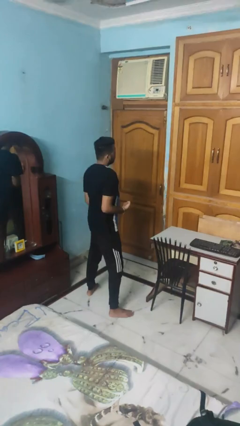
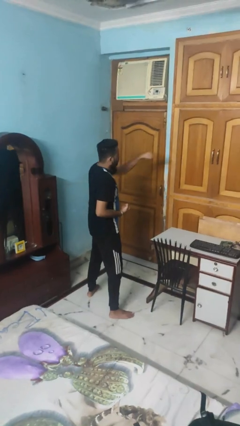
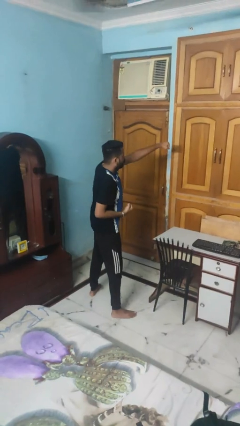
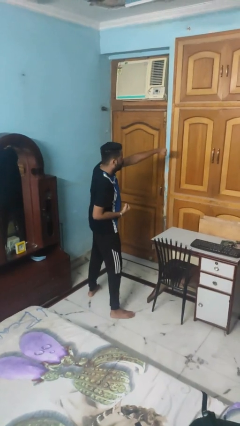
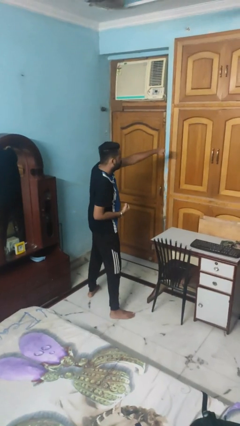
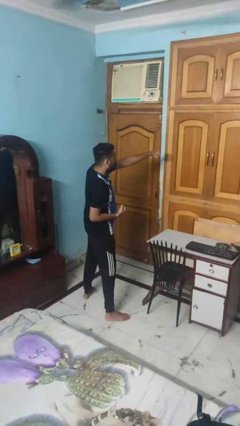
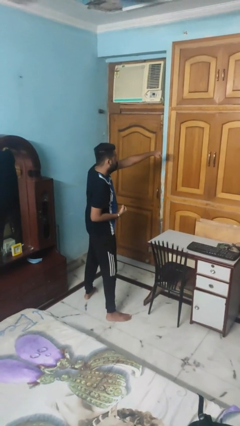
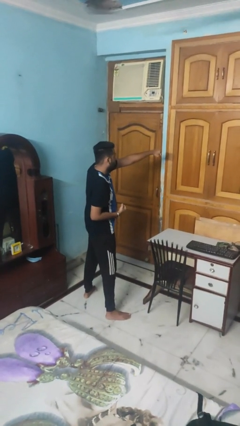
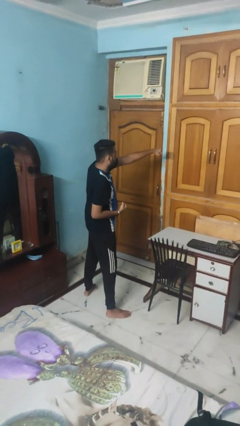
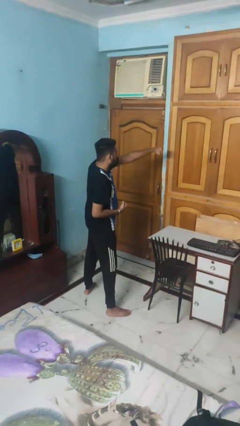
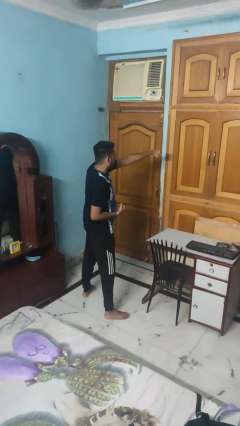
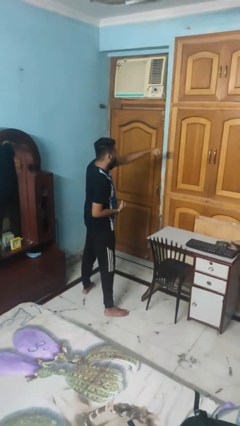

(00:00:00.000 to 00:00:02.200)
person punches

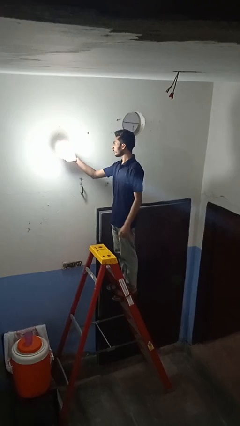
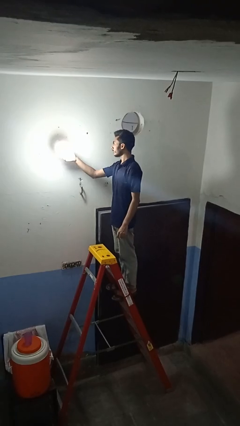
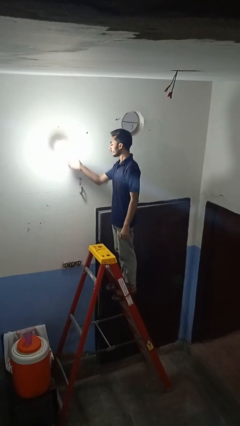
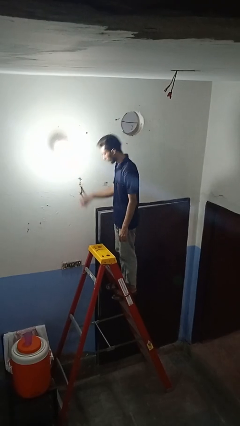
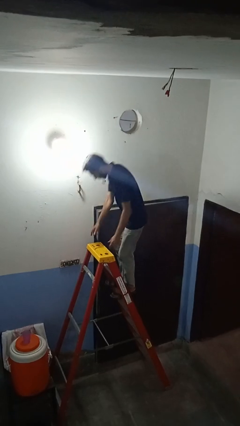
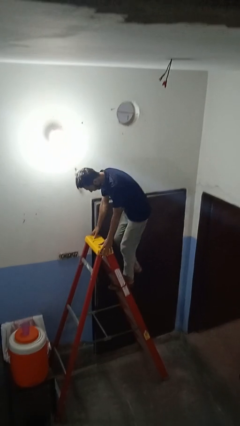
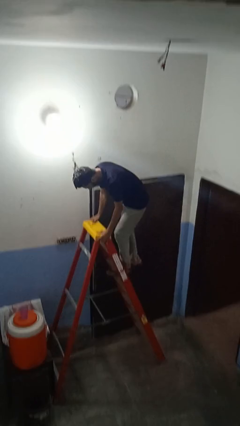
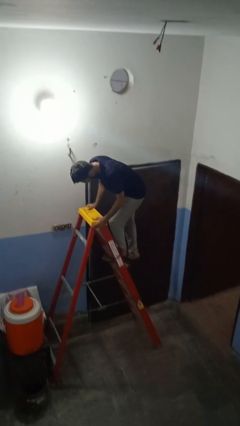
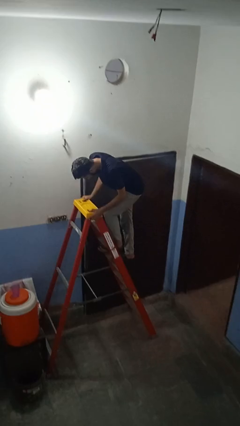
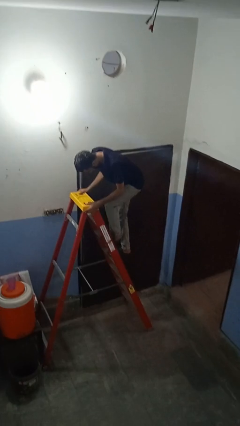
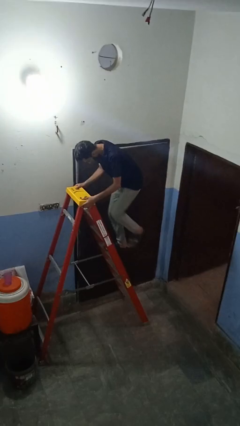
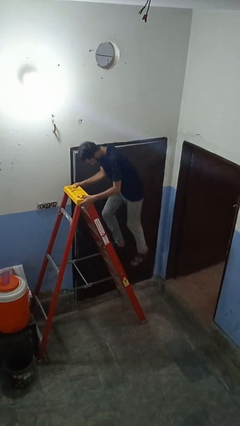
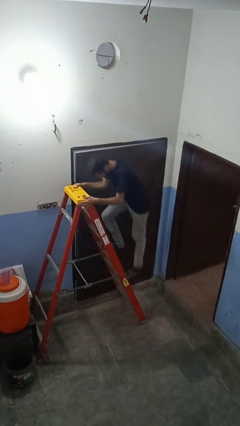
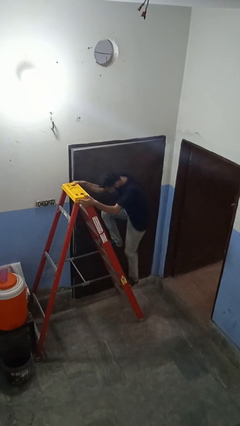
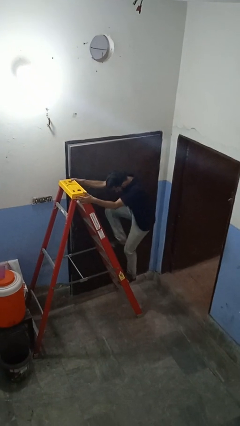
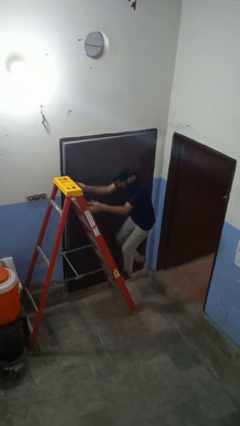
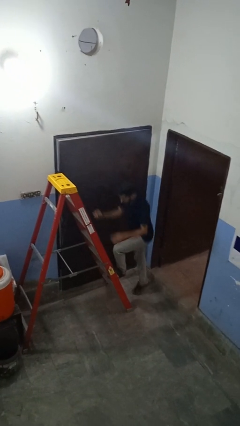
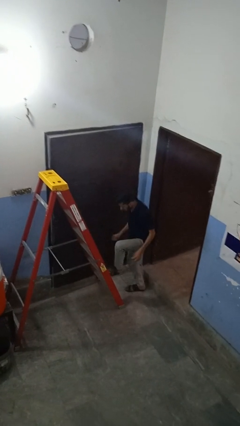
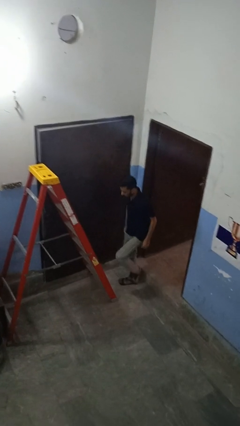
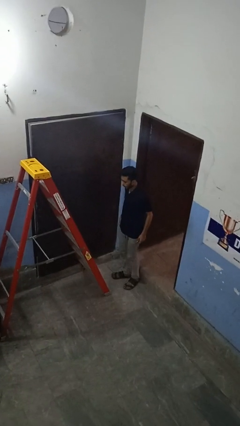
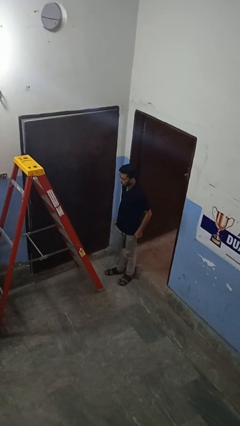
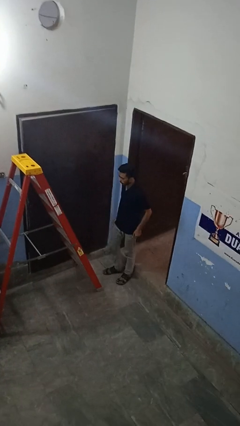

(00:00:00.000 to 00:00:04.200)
person climbs down ladder

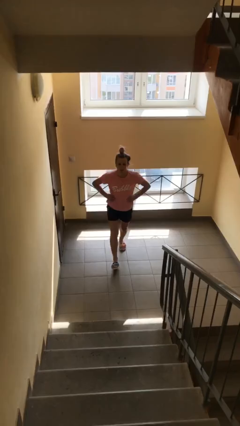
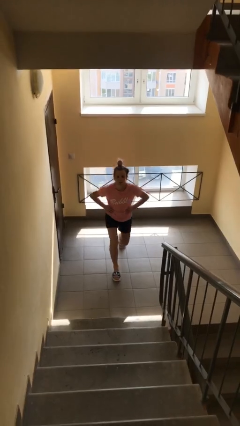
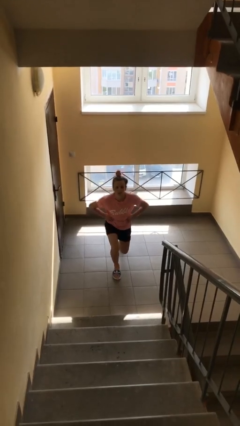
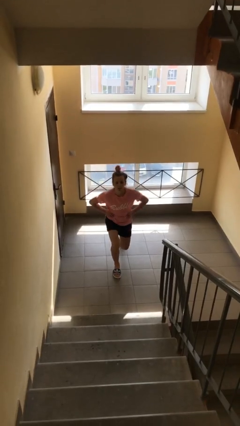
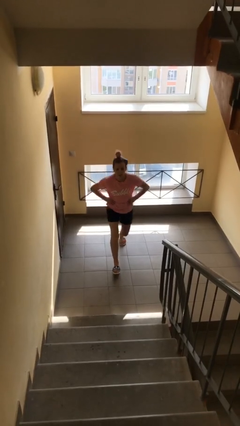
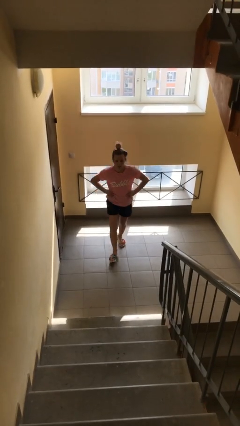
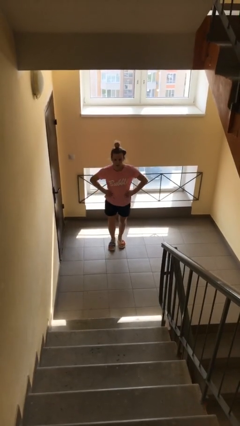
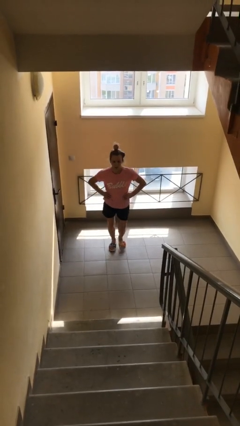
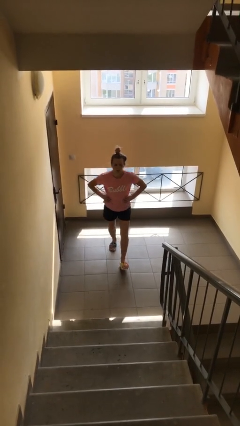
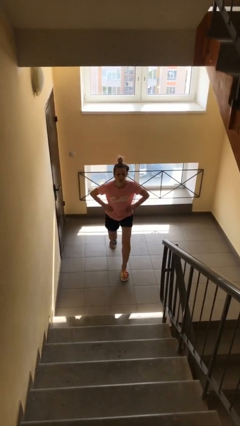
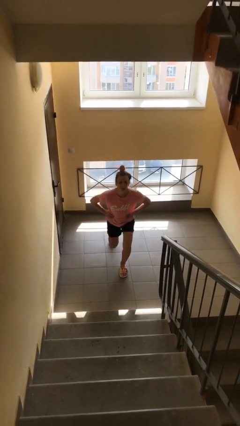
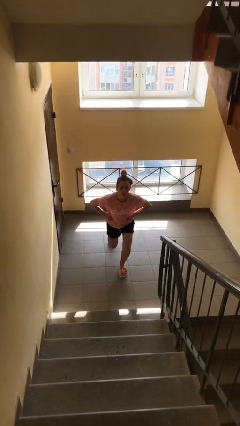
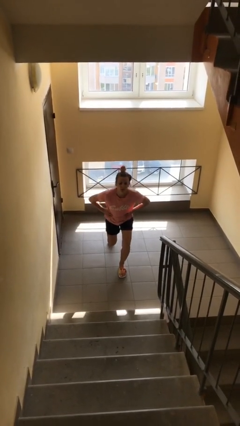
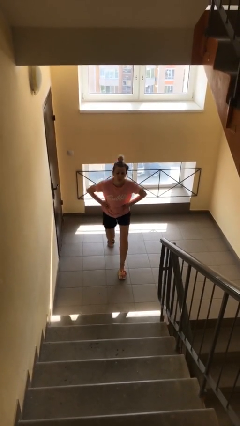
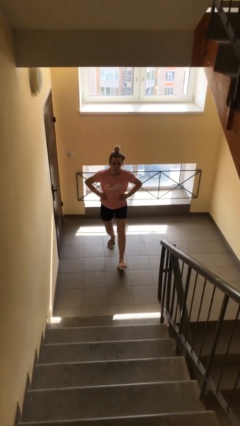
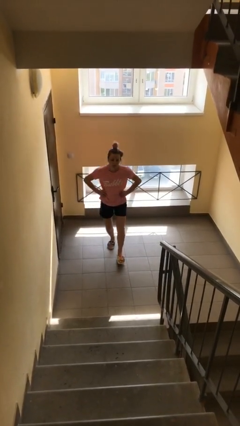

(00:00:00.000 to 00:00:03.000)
person exercises with lunges

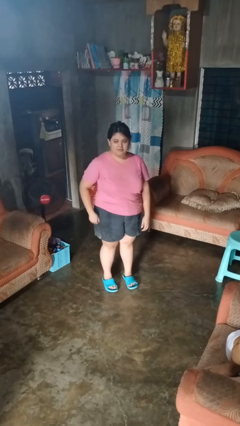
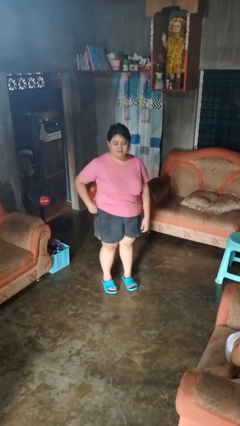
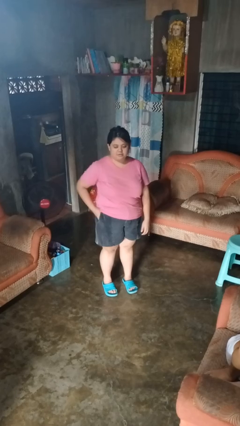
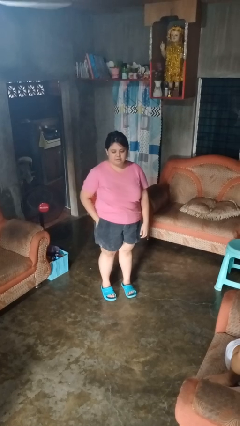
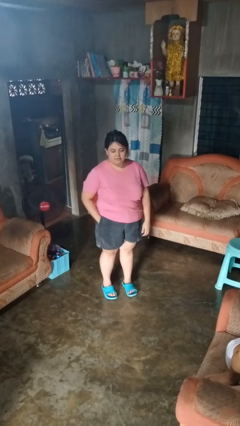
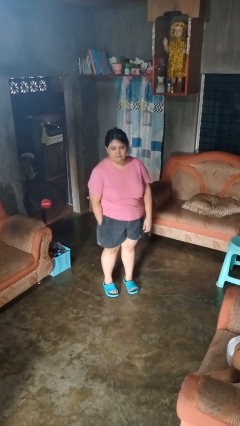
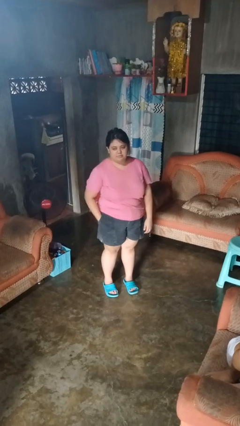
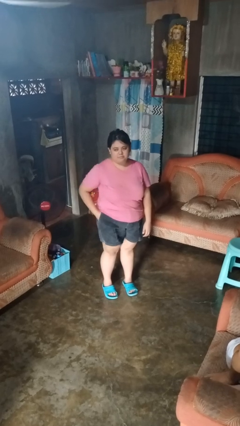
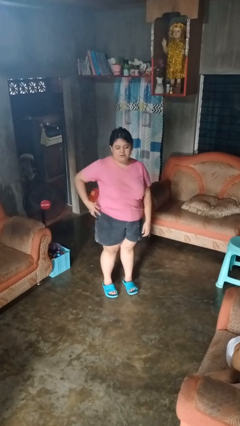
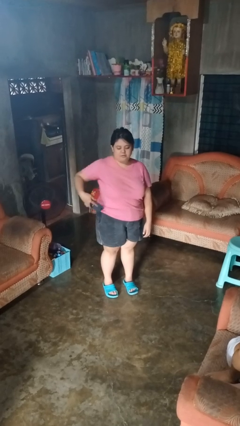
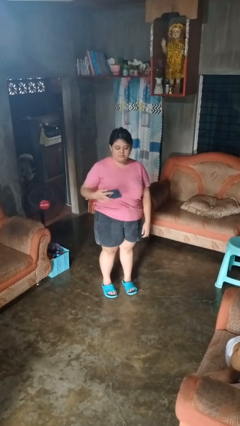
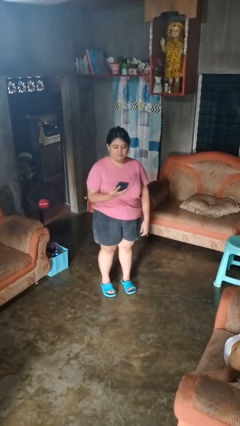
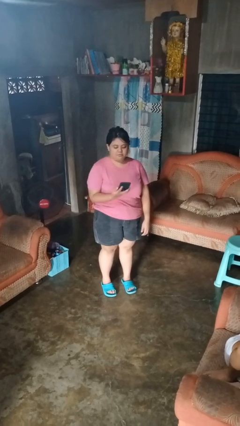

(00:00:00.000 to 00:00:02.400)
person takes phone from pocket

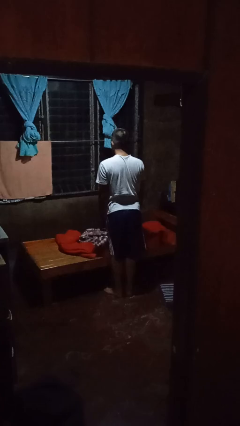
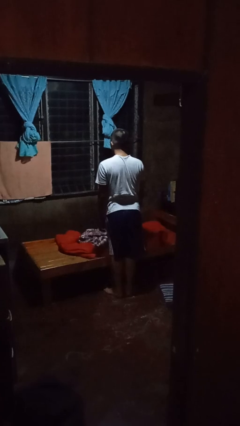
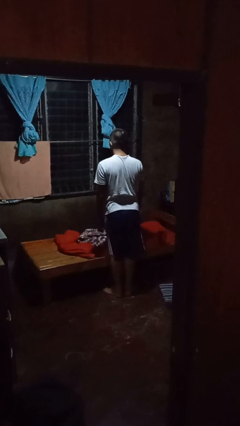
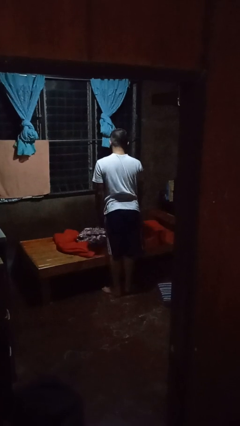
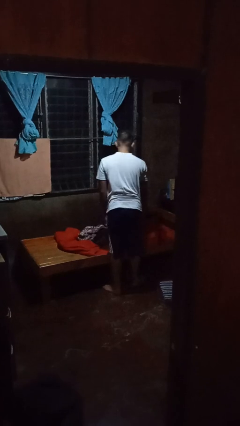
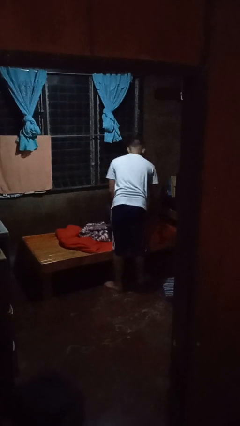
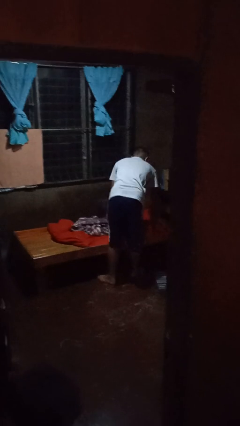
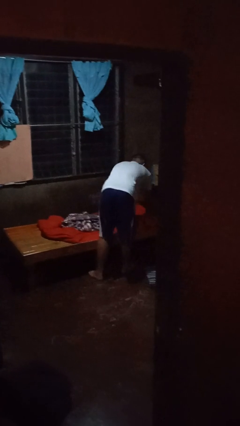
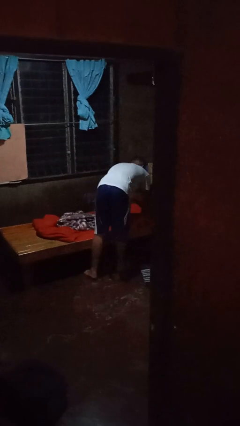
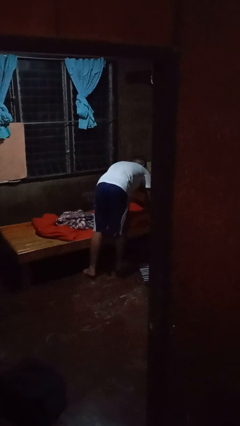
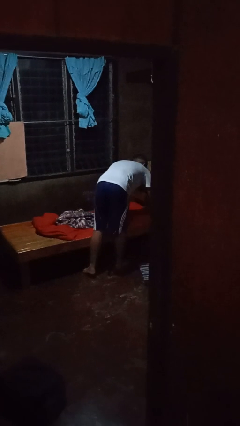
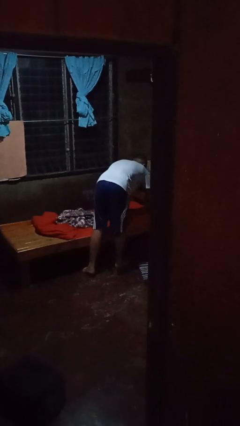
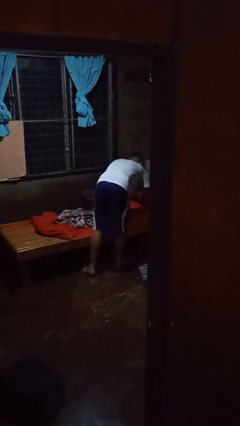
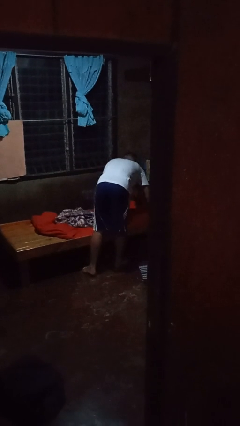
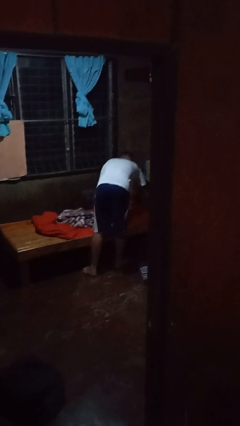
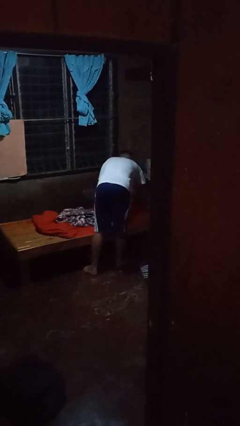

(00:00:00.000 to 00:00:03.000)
person makes bed

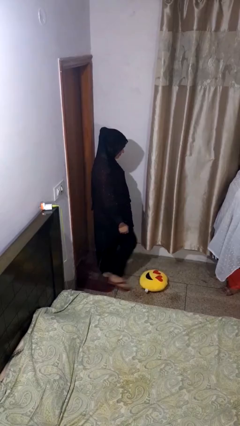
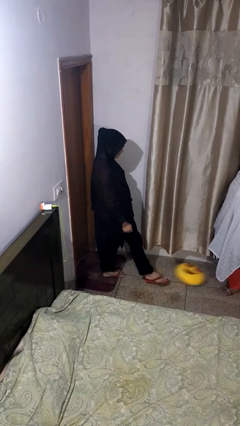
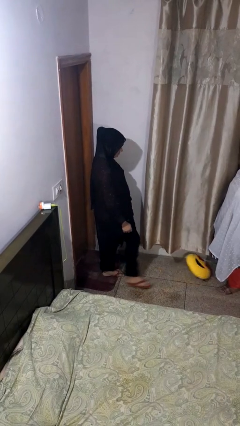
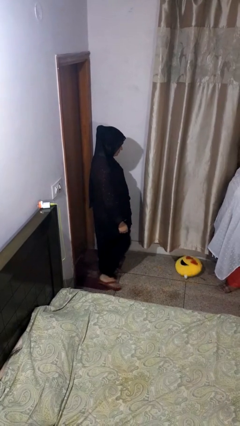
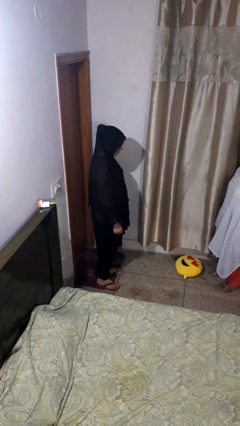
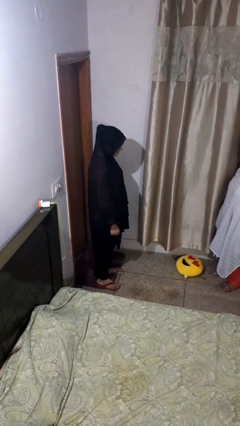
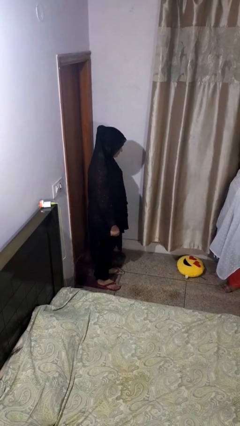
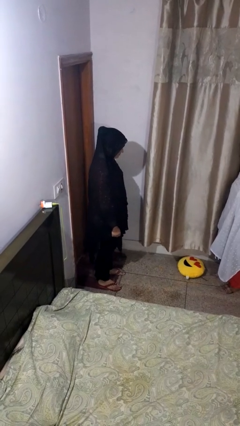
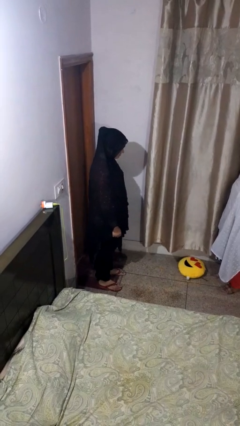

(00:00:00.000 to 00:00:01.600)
person kicks object to person

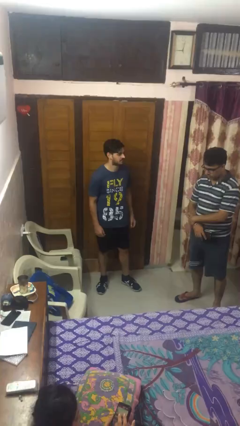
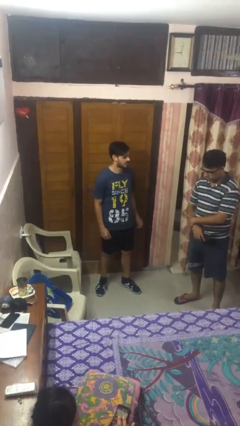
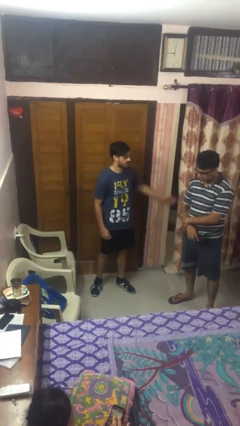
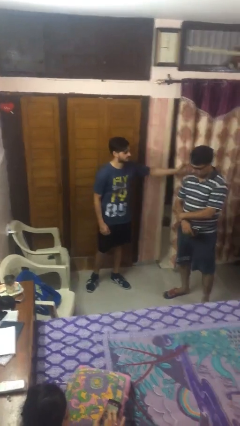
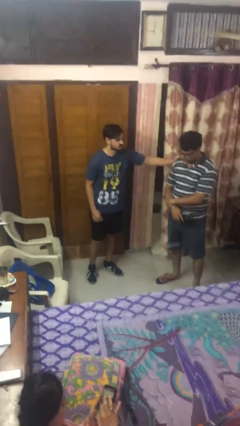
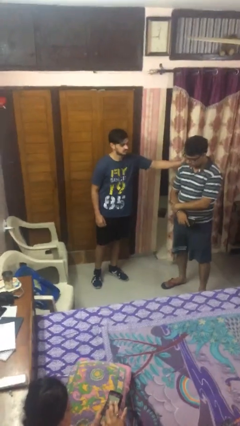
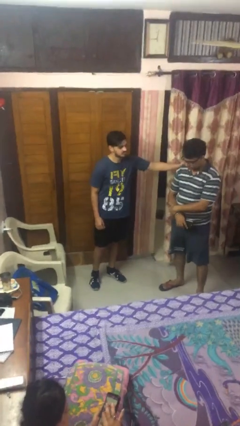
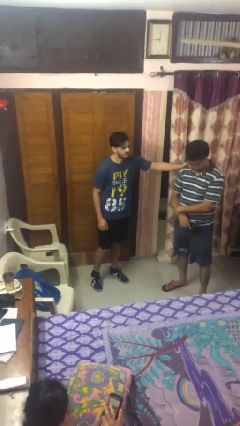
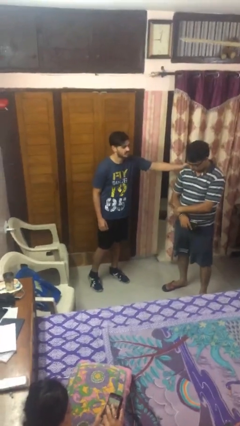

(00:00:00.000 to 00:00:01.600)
person pounds shoulders of person
